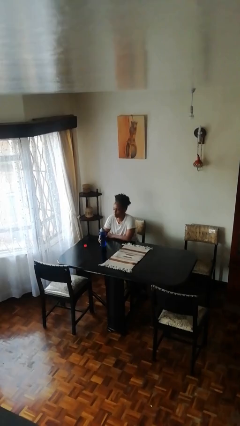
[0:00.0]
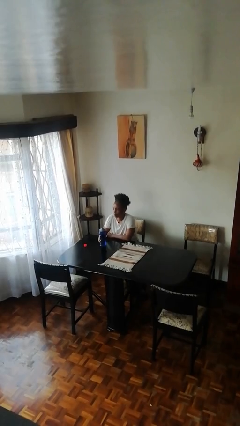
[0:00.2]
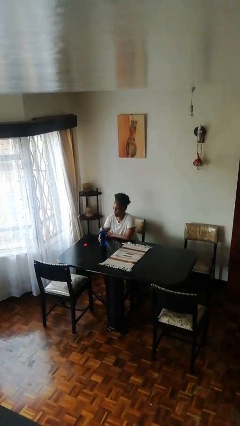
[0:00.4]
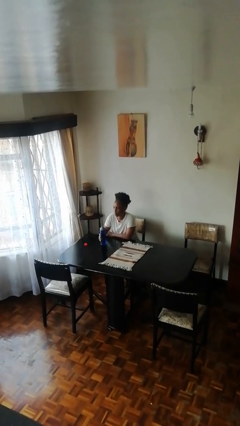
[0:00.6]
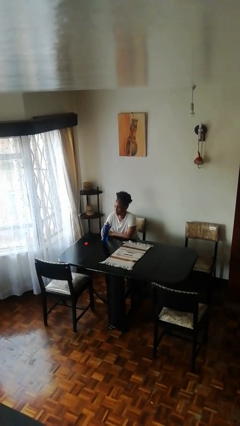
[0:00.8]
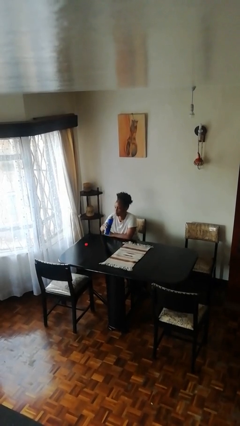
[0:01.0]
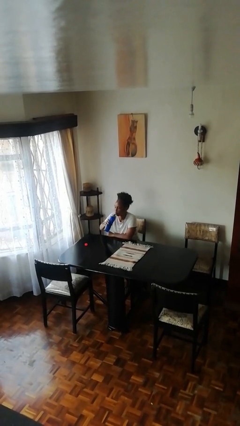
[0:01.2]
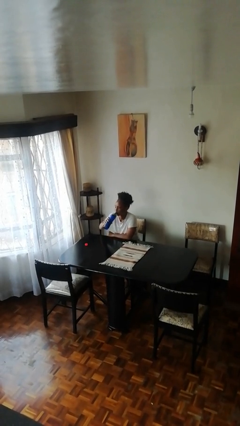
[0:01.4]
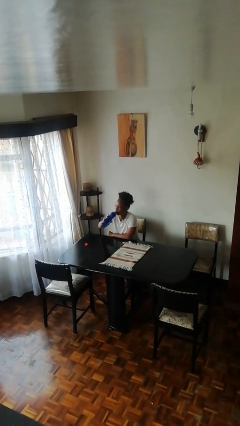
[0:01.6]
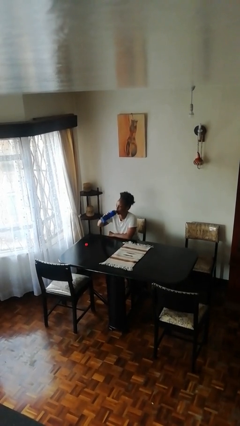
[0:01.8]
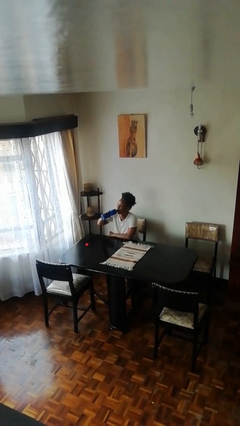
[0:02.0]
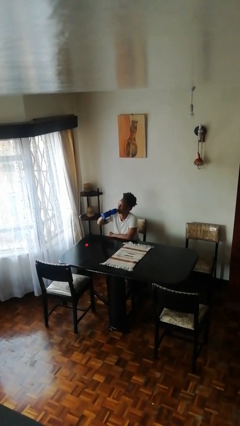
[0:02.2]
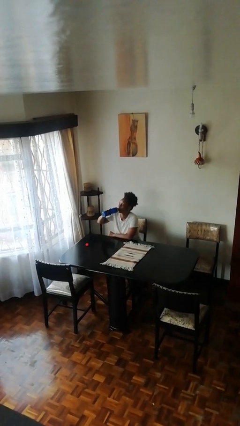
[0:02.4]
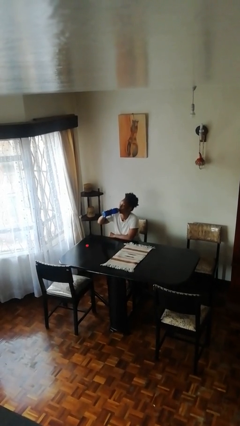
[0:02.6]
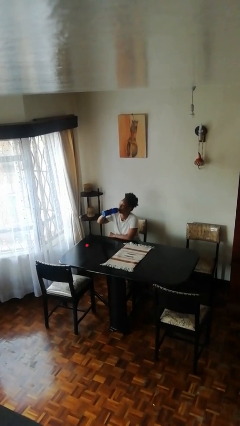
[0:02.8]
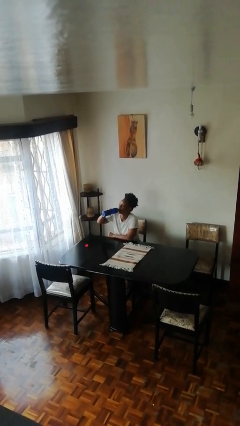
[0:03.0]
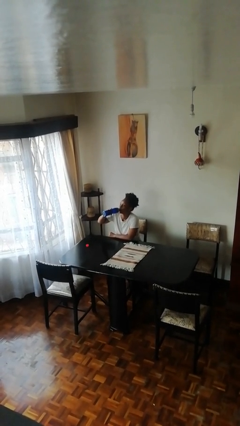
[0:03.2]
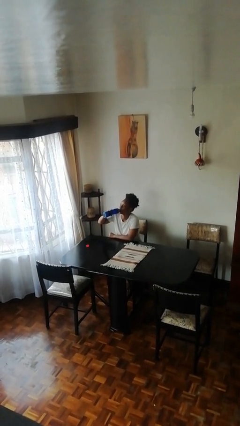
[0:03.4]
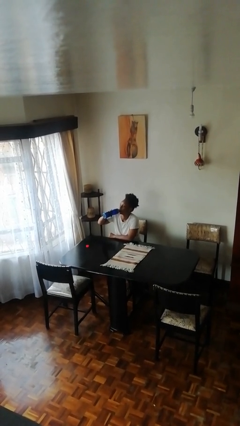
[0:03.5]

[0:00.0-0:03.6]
person drinks from bottle

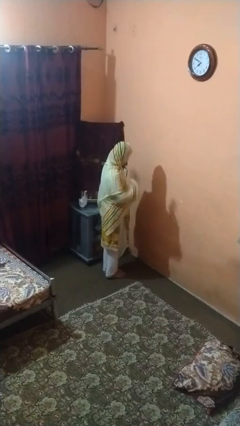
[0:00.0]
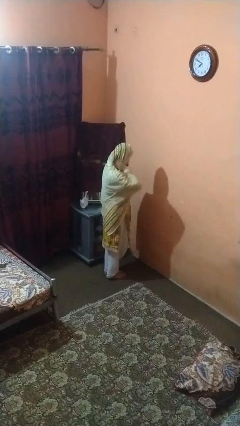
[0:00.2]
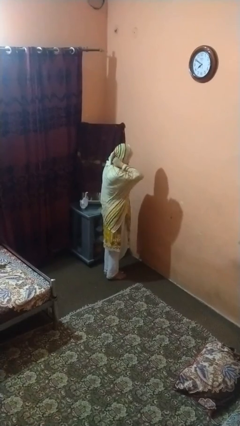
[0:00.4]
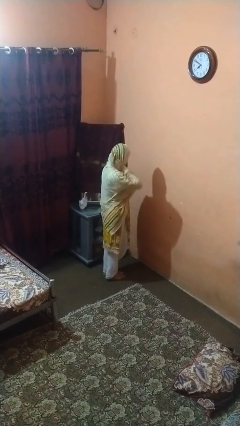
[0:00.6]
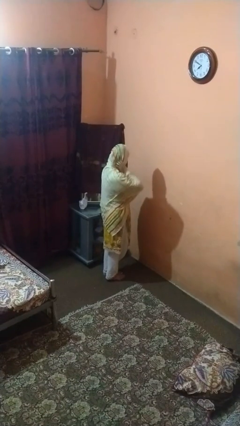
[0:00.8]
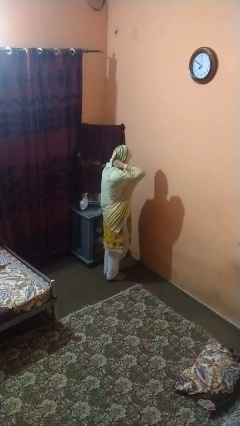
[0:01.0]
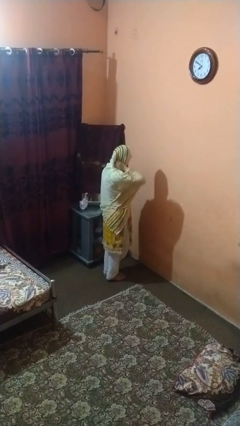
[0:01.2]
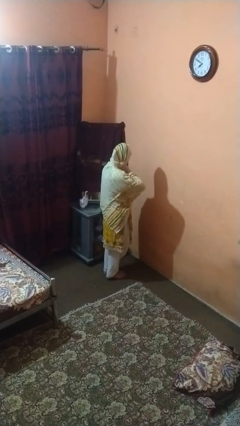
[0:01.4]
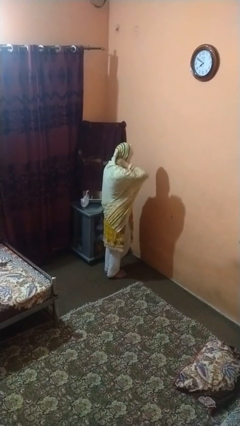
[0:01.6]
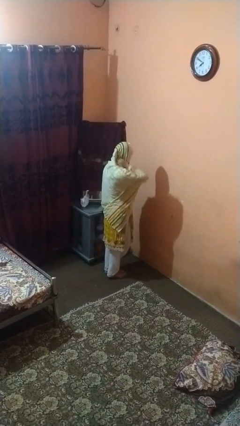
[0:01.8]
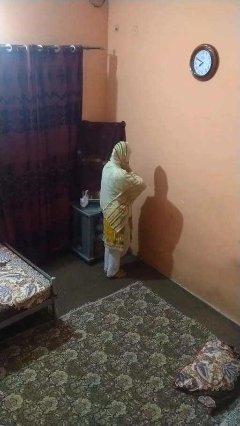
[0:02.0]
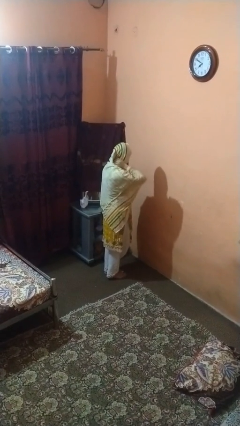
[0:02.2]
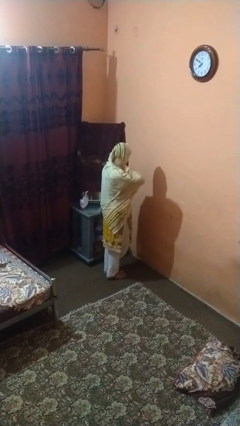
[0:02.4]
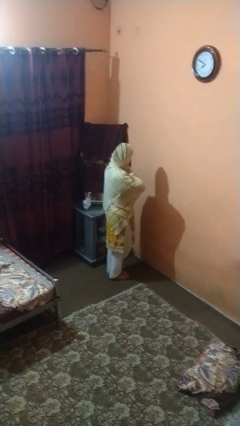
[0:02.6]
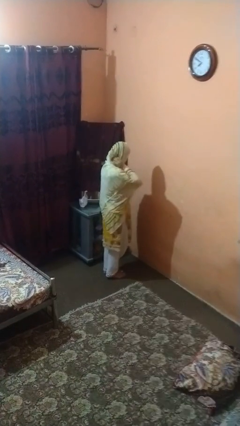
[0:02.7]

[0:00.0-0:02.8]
person rubs neck

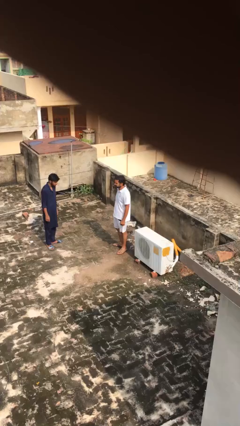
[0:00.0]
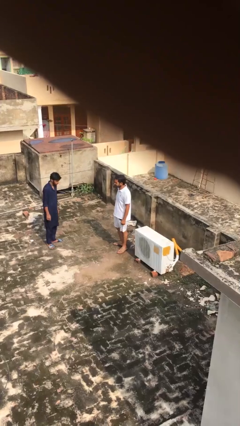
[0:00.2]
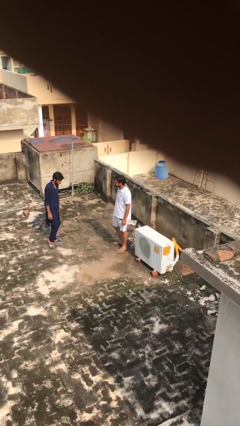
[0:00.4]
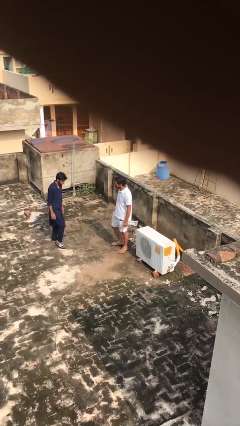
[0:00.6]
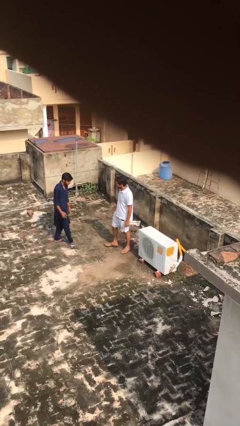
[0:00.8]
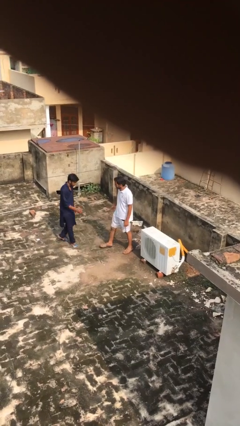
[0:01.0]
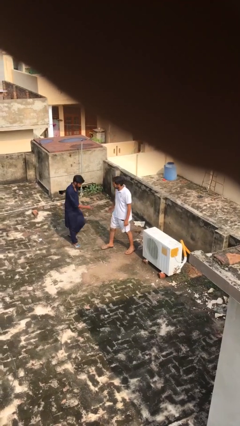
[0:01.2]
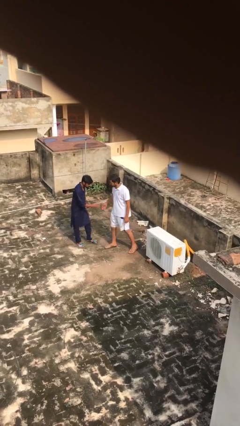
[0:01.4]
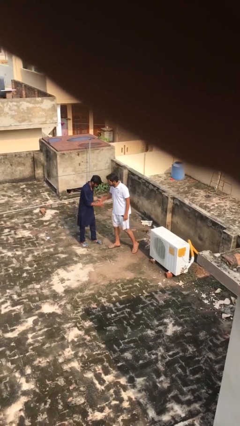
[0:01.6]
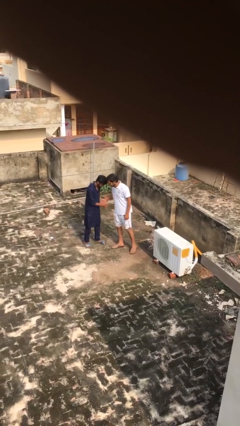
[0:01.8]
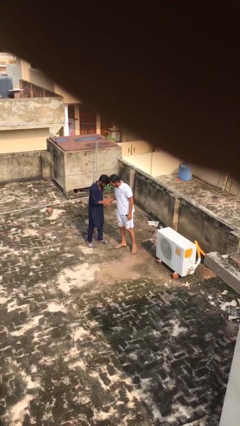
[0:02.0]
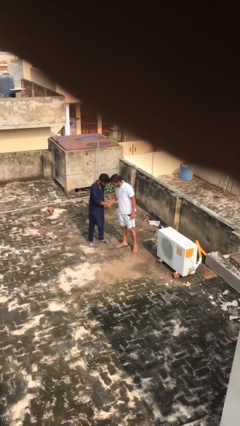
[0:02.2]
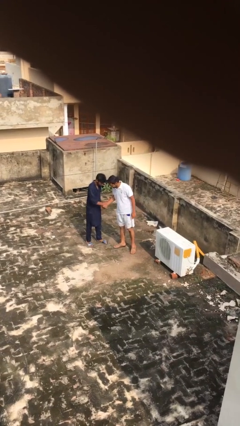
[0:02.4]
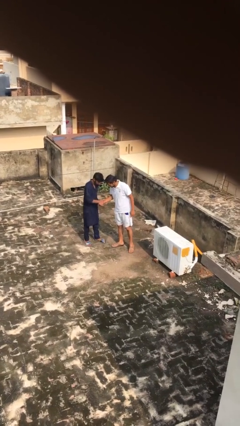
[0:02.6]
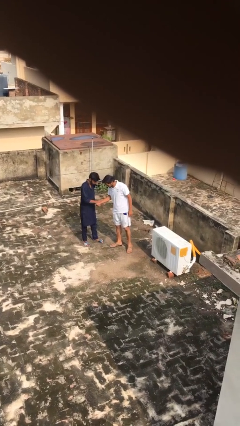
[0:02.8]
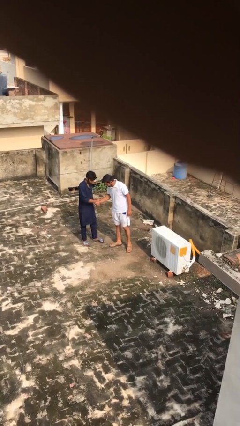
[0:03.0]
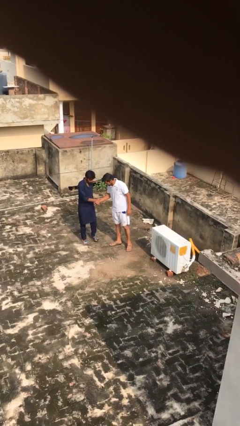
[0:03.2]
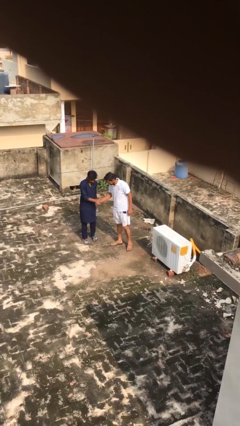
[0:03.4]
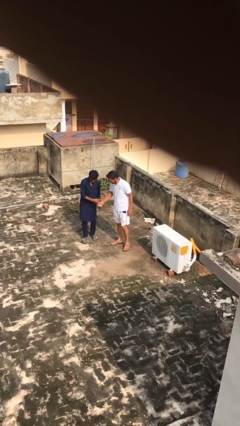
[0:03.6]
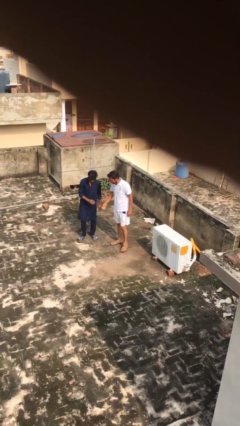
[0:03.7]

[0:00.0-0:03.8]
person shakes hand

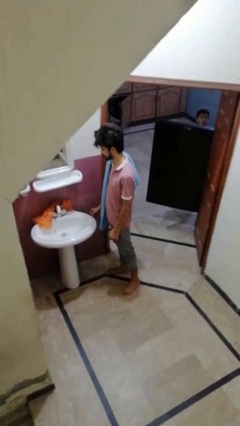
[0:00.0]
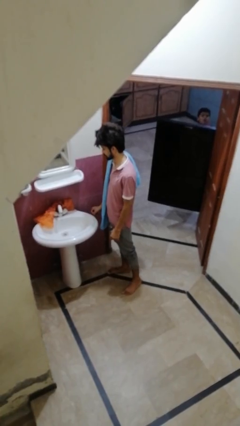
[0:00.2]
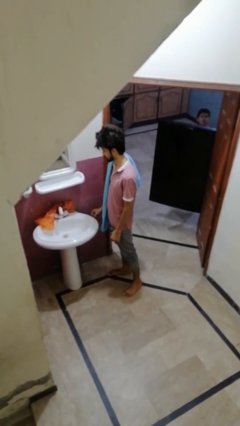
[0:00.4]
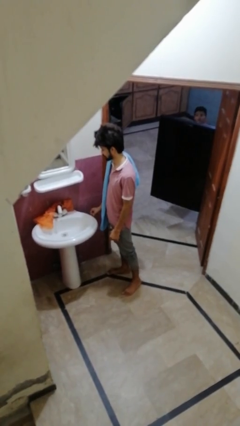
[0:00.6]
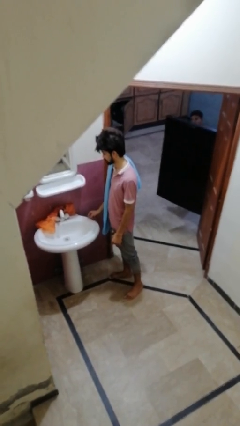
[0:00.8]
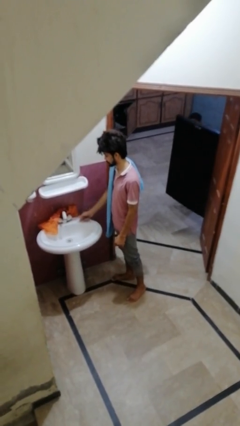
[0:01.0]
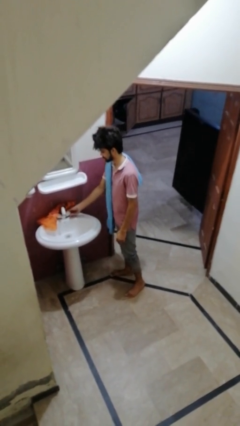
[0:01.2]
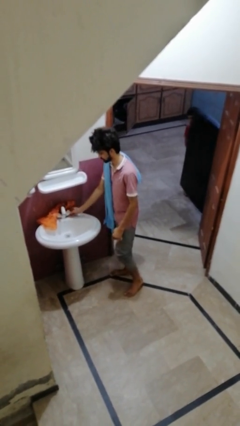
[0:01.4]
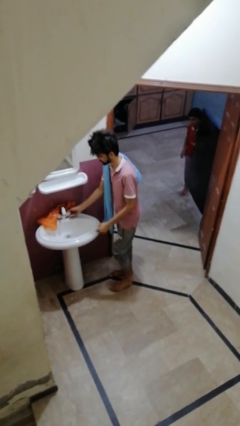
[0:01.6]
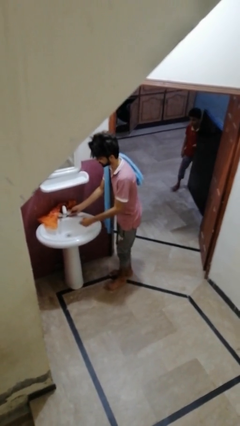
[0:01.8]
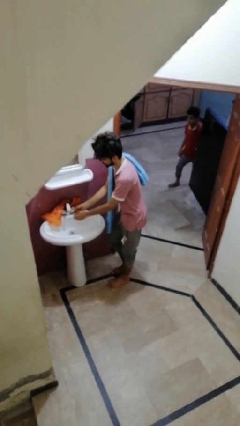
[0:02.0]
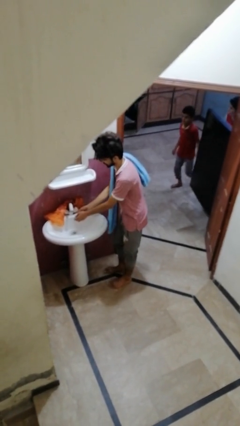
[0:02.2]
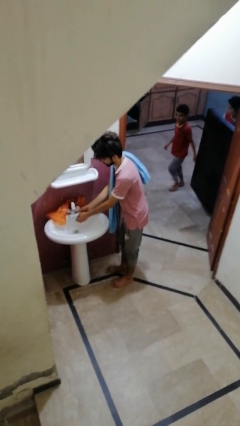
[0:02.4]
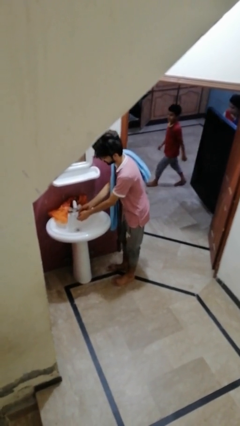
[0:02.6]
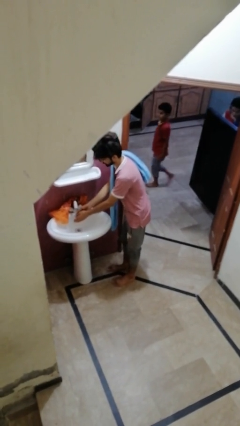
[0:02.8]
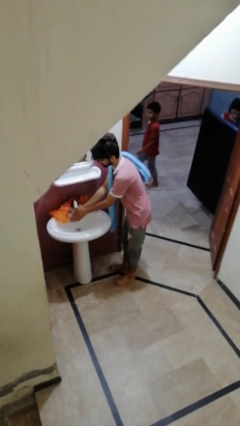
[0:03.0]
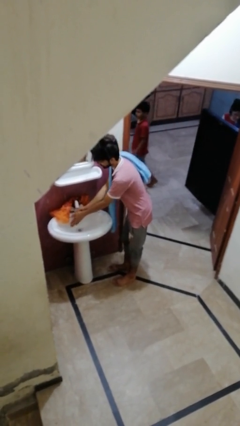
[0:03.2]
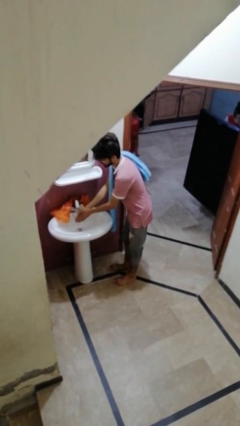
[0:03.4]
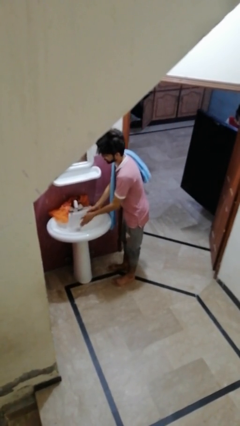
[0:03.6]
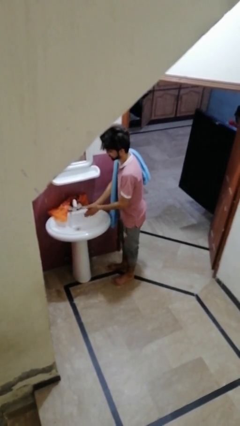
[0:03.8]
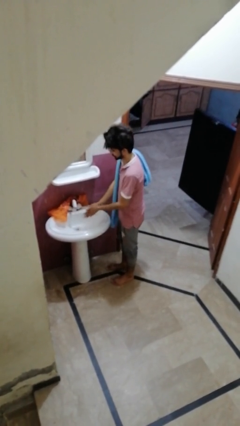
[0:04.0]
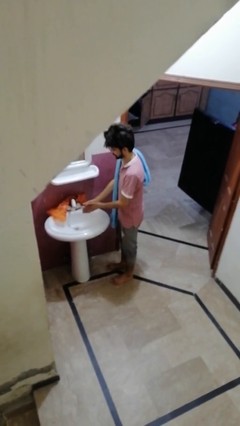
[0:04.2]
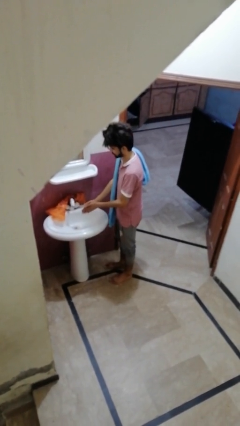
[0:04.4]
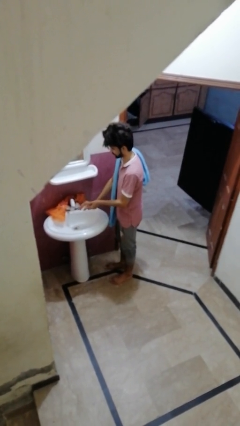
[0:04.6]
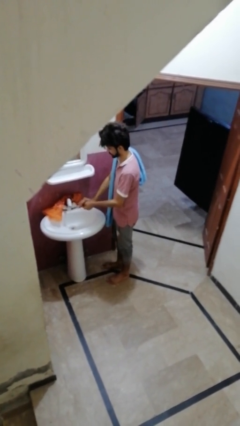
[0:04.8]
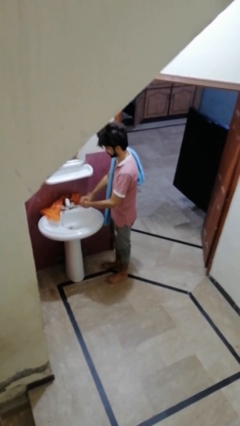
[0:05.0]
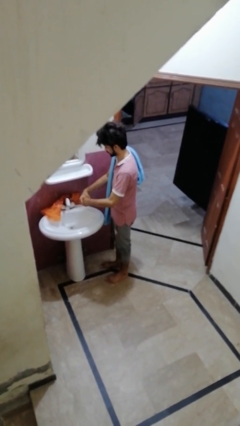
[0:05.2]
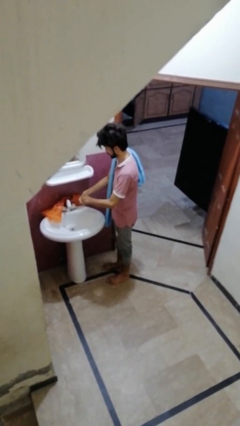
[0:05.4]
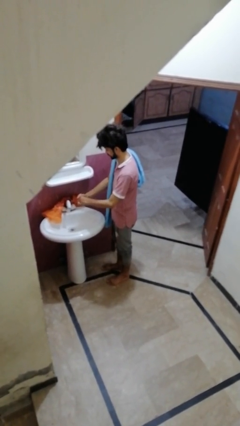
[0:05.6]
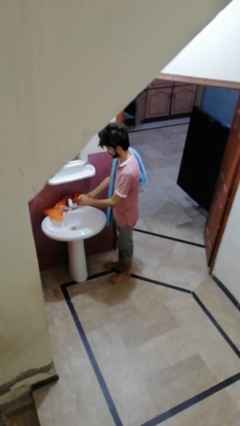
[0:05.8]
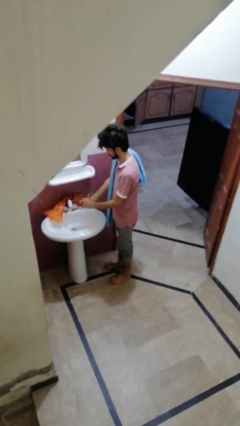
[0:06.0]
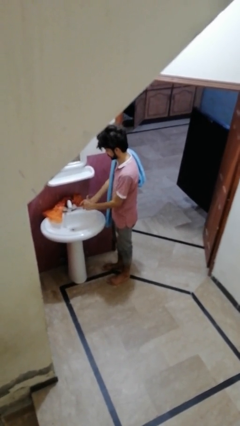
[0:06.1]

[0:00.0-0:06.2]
person washes hands

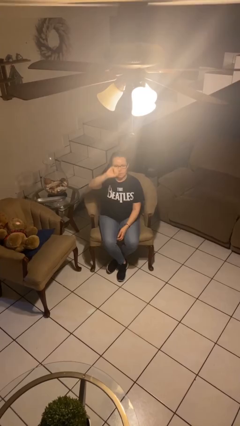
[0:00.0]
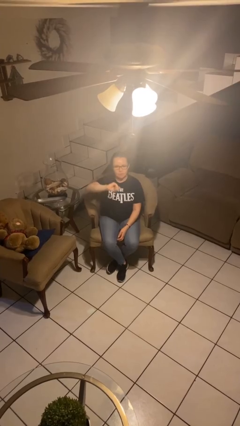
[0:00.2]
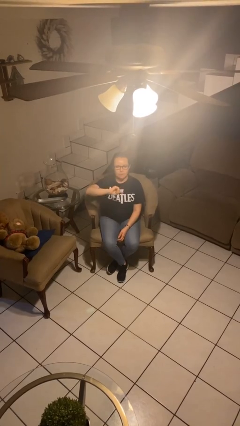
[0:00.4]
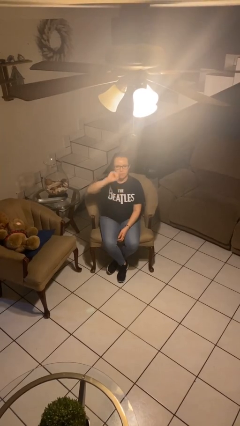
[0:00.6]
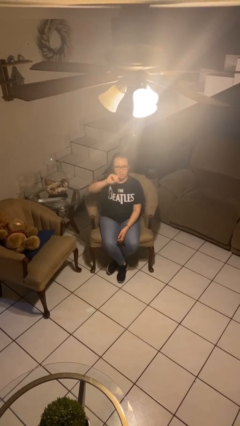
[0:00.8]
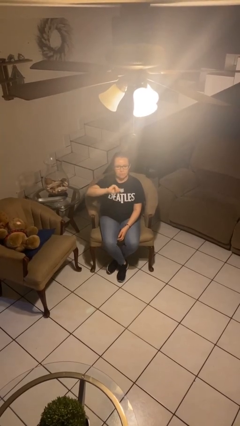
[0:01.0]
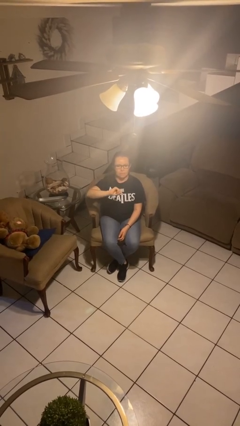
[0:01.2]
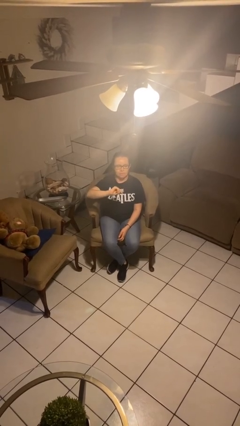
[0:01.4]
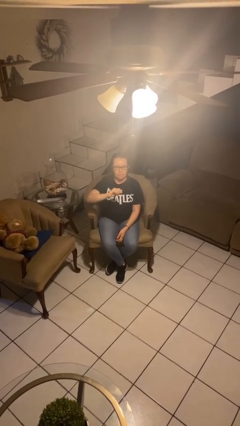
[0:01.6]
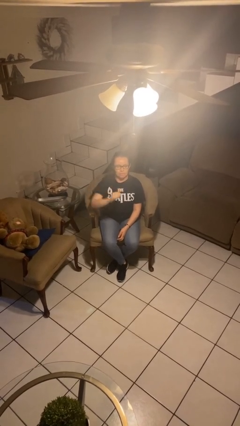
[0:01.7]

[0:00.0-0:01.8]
person gestures swipe down
